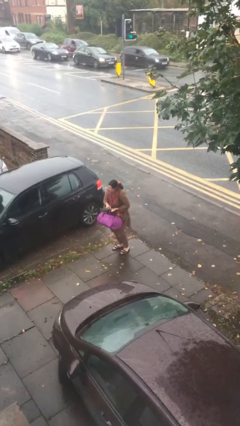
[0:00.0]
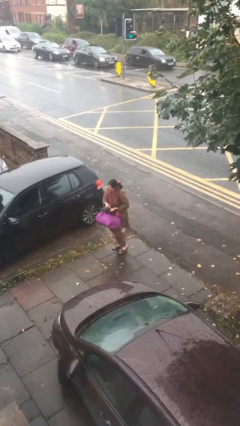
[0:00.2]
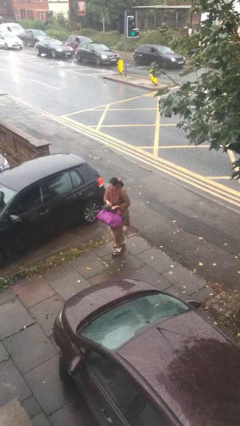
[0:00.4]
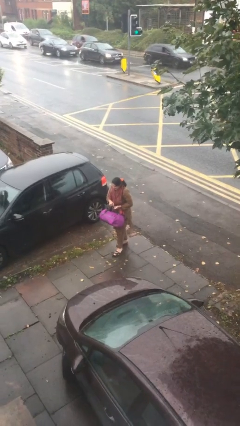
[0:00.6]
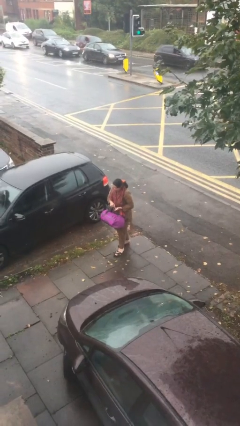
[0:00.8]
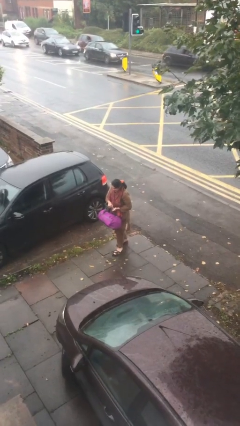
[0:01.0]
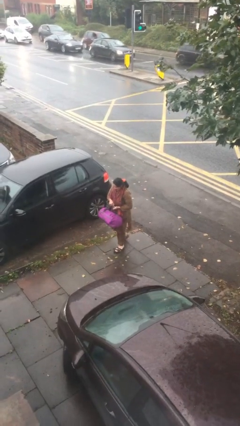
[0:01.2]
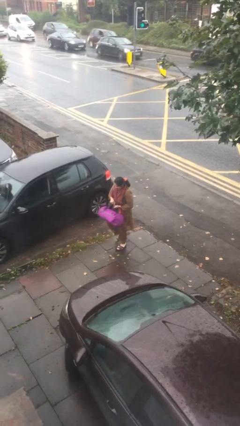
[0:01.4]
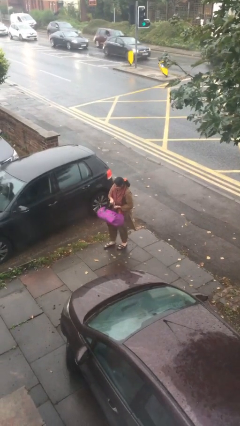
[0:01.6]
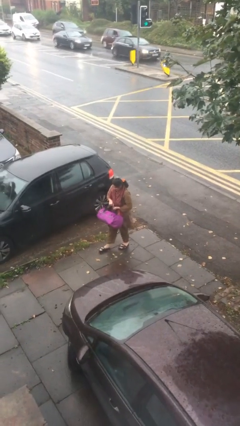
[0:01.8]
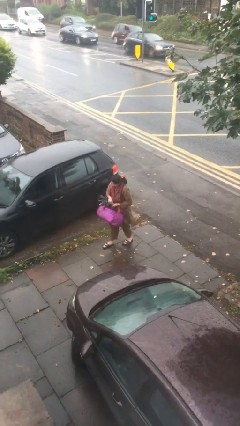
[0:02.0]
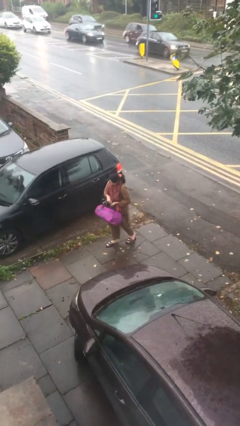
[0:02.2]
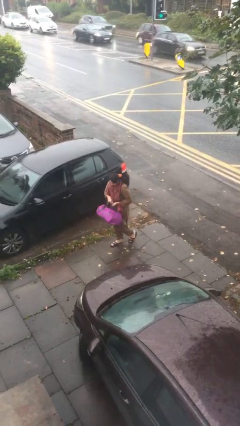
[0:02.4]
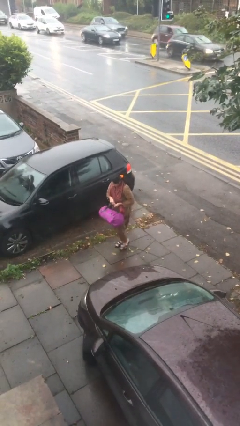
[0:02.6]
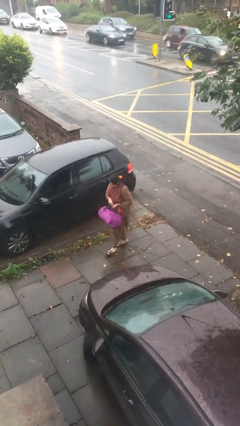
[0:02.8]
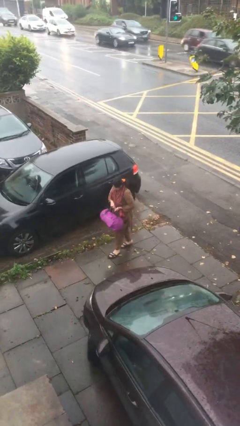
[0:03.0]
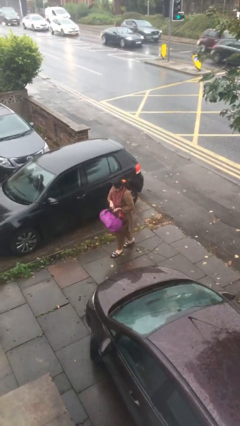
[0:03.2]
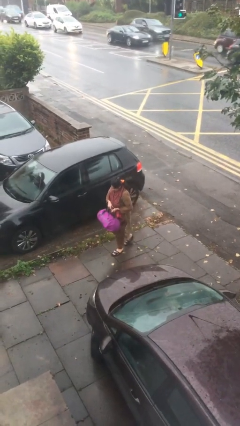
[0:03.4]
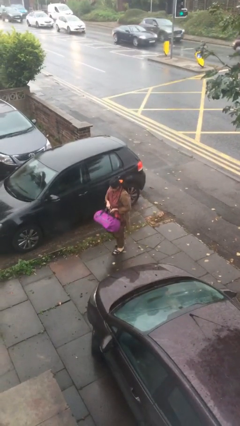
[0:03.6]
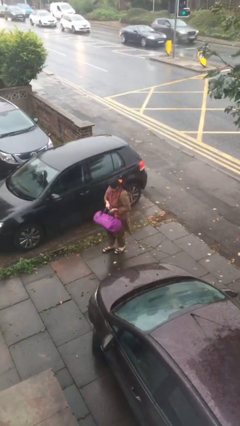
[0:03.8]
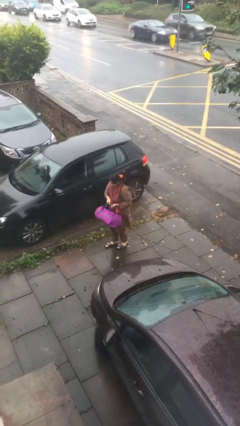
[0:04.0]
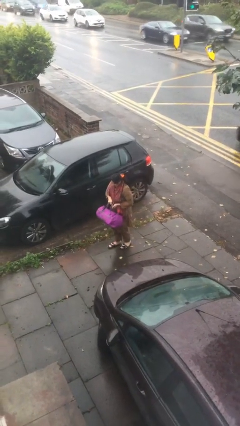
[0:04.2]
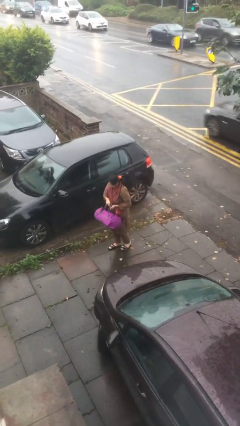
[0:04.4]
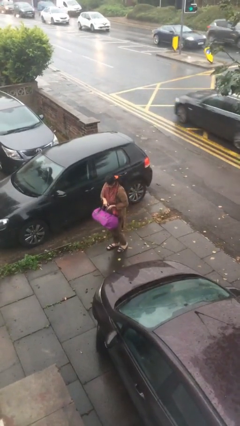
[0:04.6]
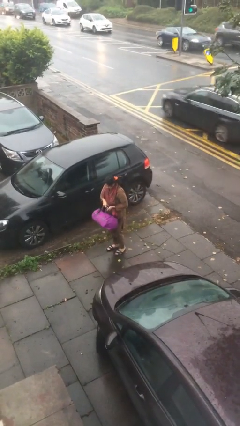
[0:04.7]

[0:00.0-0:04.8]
person carries heavy object

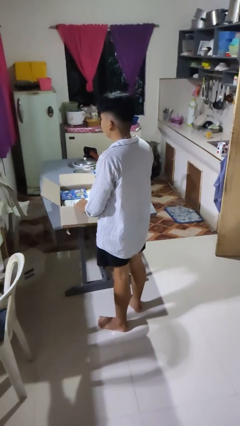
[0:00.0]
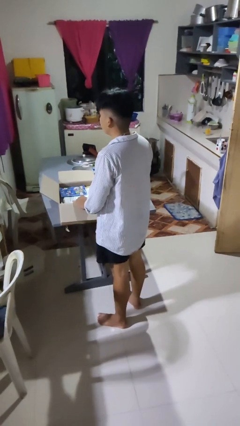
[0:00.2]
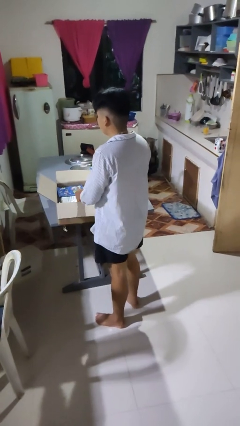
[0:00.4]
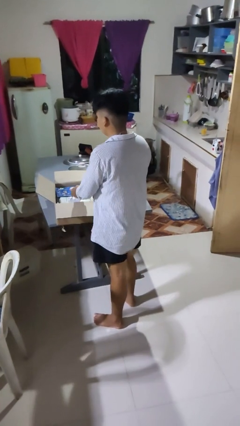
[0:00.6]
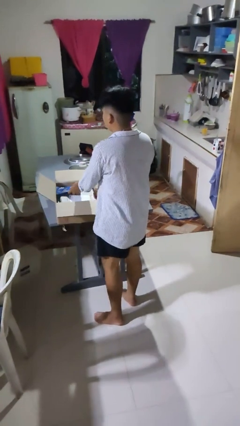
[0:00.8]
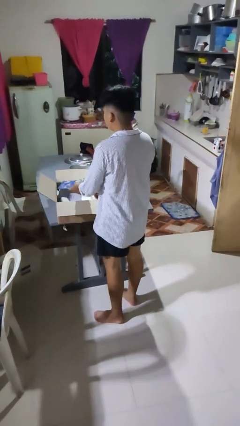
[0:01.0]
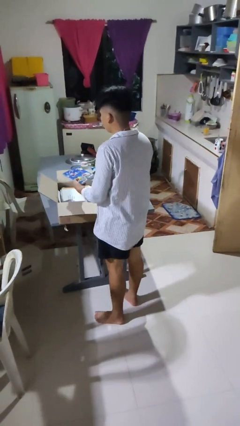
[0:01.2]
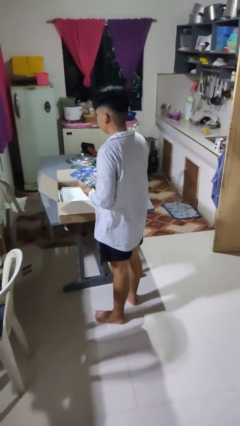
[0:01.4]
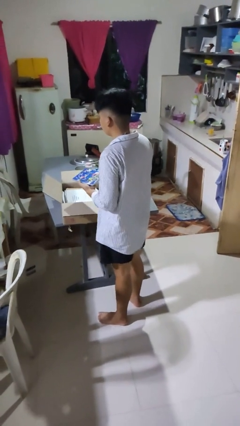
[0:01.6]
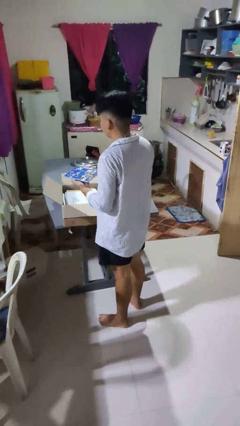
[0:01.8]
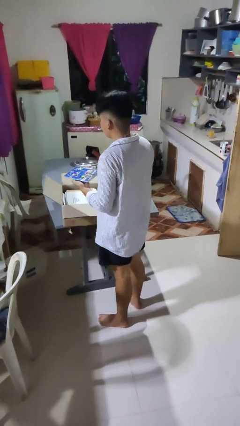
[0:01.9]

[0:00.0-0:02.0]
person takes object from box

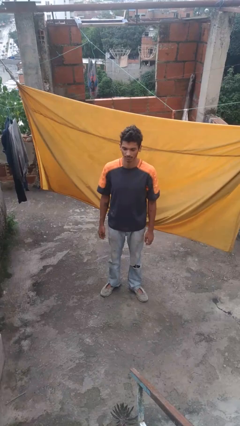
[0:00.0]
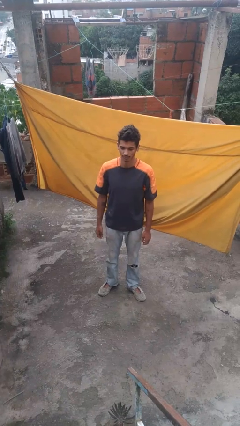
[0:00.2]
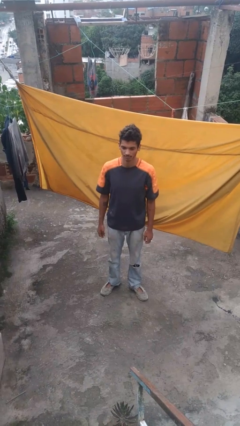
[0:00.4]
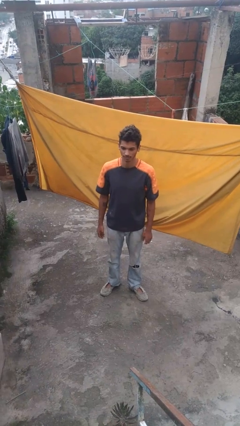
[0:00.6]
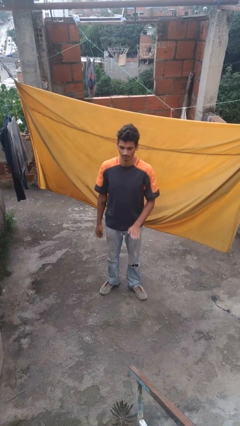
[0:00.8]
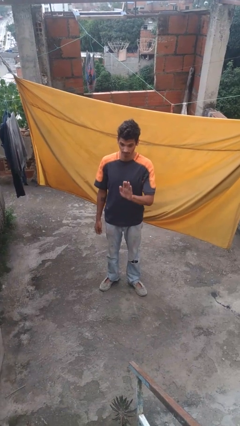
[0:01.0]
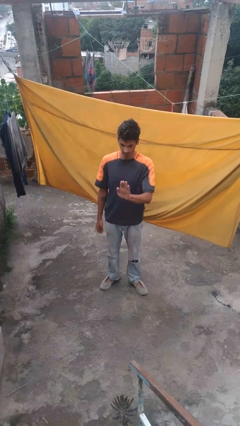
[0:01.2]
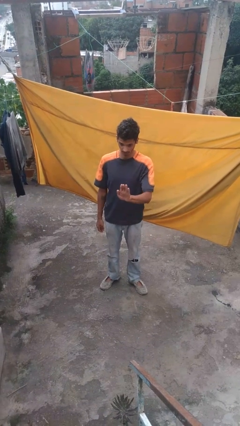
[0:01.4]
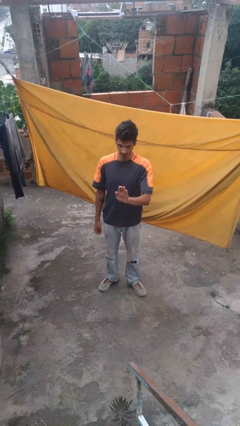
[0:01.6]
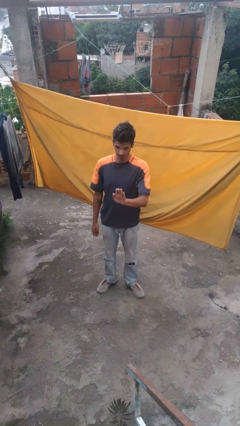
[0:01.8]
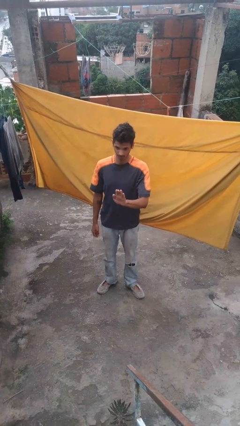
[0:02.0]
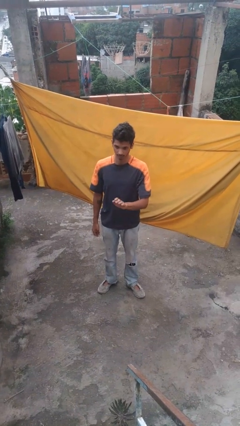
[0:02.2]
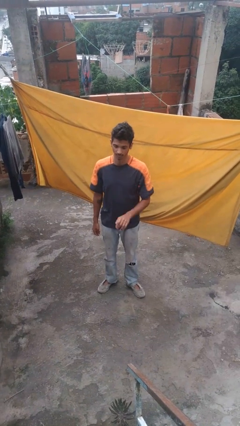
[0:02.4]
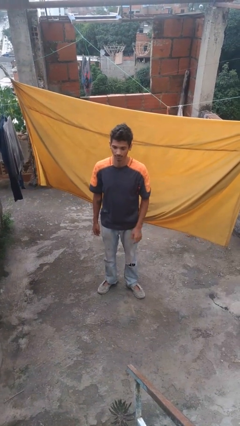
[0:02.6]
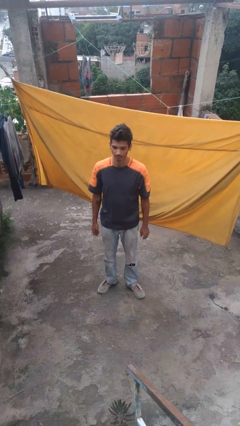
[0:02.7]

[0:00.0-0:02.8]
person gestures stop

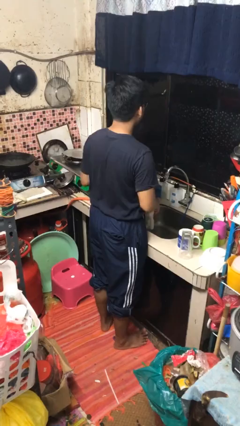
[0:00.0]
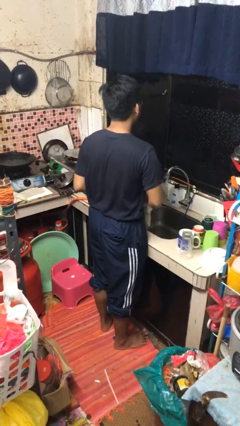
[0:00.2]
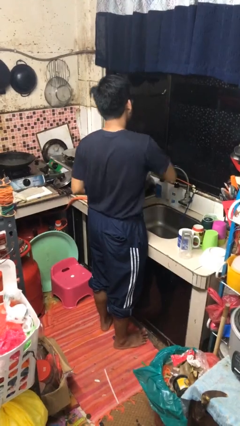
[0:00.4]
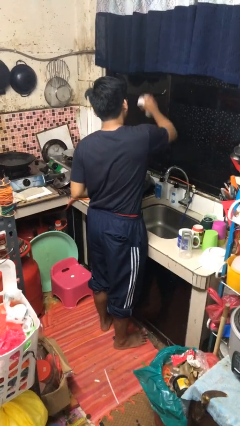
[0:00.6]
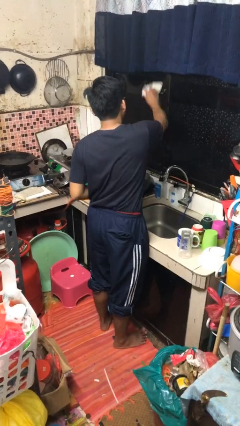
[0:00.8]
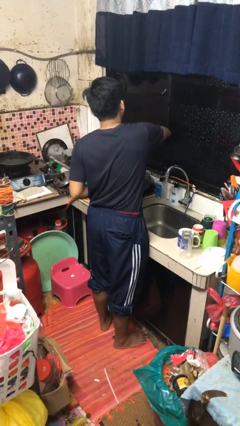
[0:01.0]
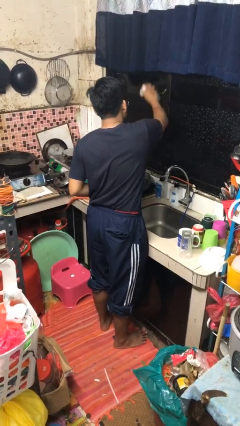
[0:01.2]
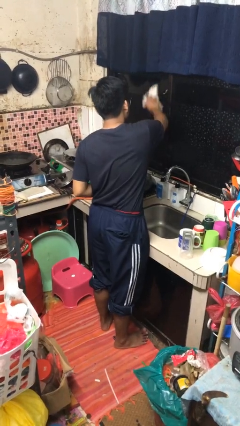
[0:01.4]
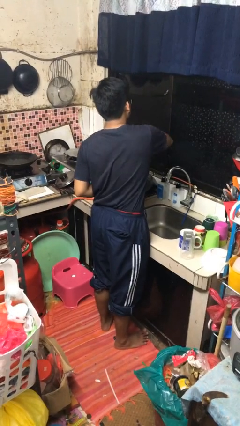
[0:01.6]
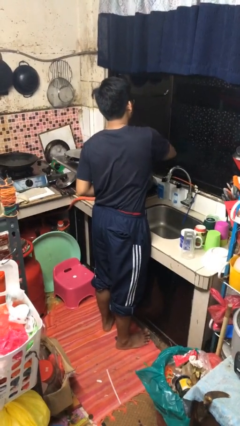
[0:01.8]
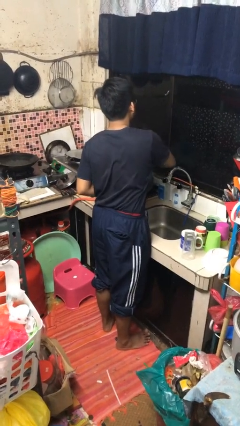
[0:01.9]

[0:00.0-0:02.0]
person washes window

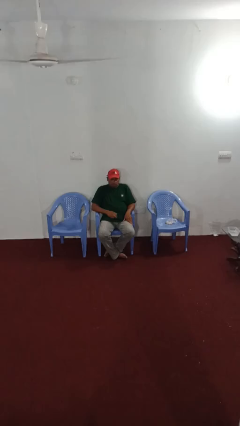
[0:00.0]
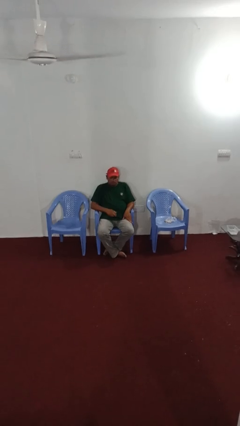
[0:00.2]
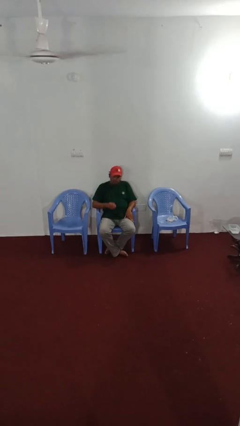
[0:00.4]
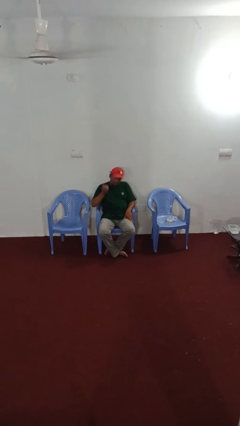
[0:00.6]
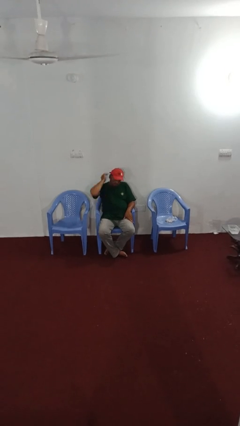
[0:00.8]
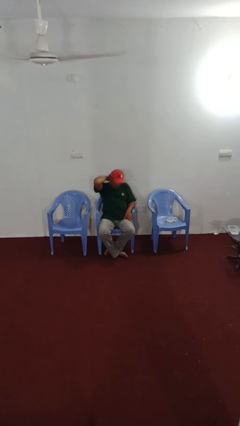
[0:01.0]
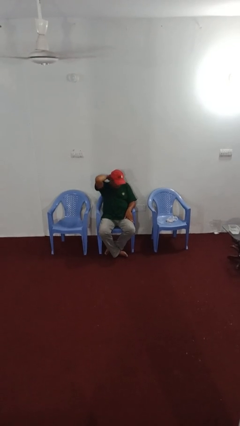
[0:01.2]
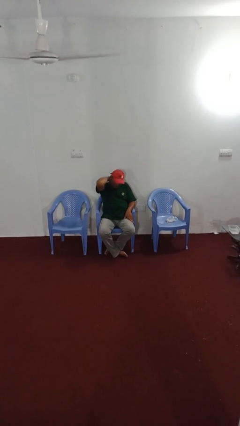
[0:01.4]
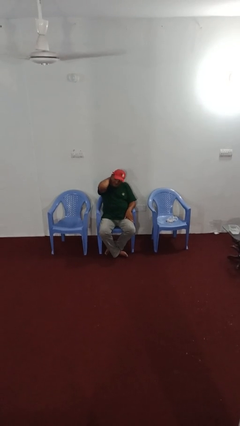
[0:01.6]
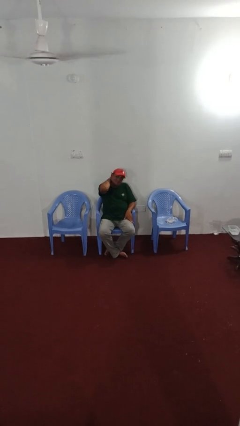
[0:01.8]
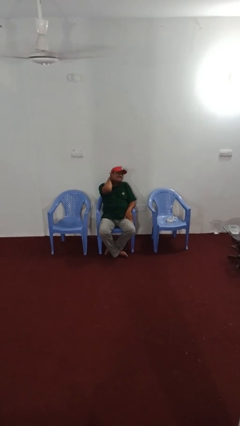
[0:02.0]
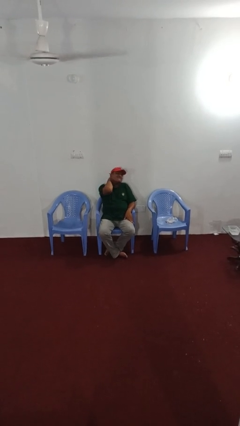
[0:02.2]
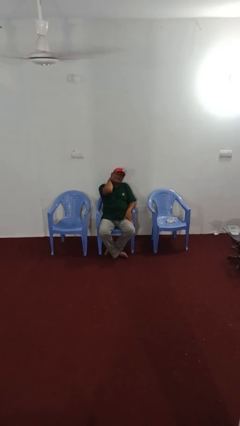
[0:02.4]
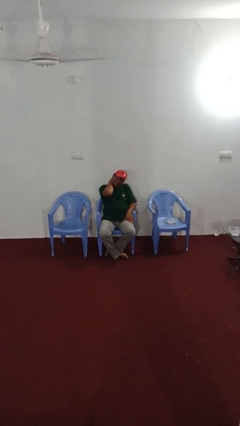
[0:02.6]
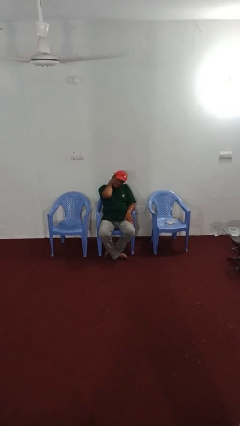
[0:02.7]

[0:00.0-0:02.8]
person rubs neck

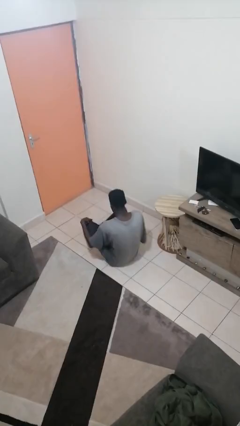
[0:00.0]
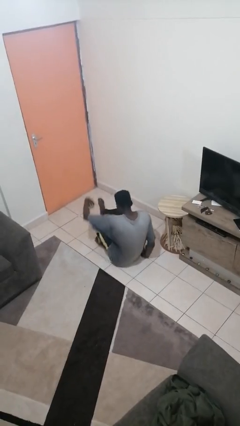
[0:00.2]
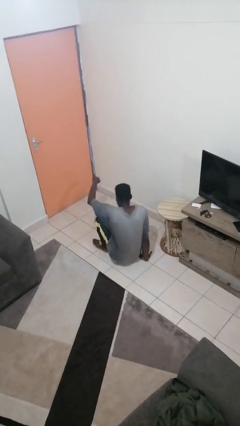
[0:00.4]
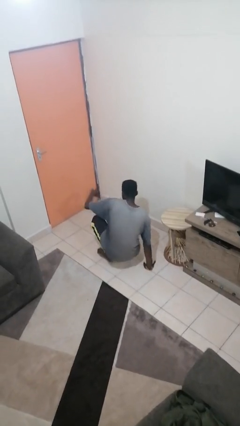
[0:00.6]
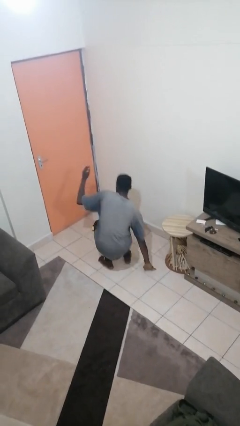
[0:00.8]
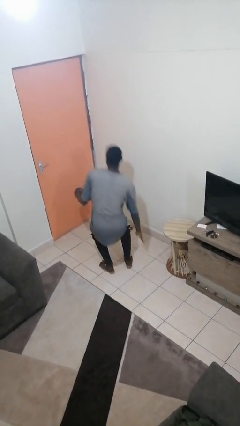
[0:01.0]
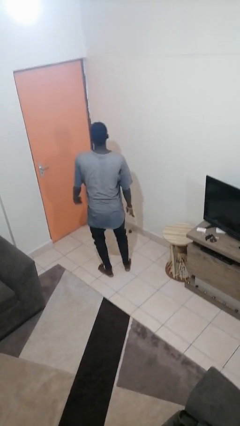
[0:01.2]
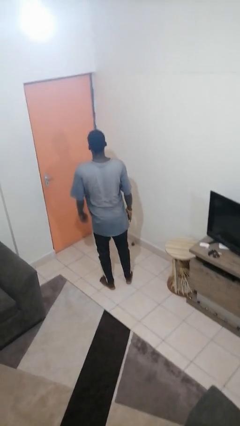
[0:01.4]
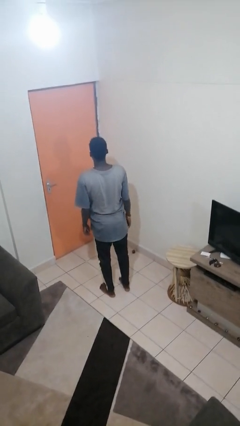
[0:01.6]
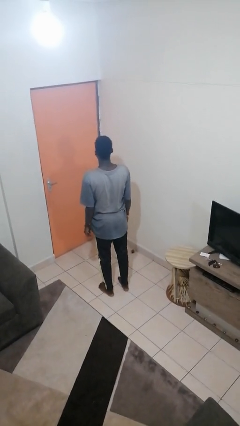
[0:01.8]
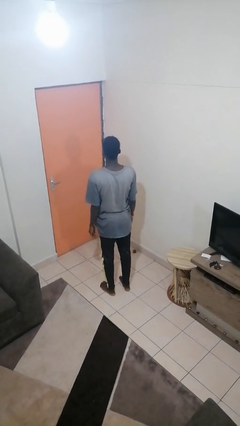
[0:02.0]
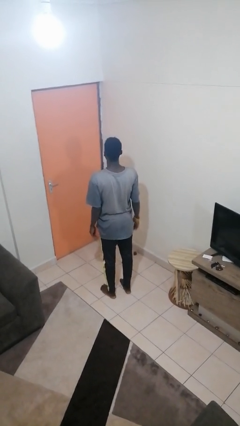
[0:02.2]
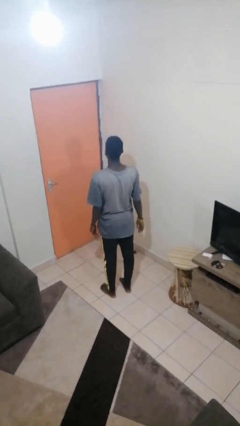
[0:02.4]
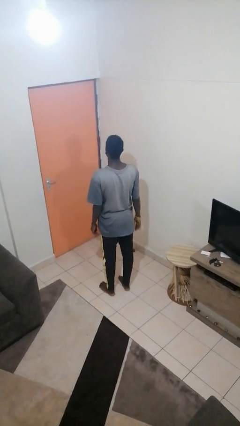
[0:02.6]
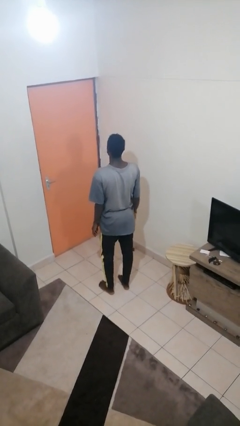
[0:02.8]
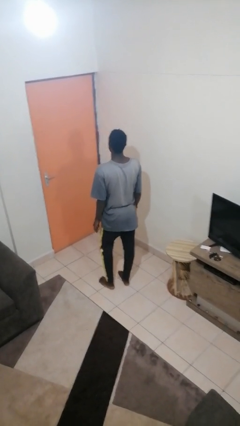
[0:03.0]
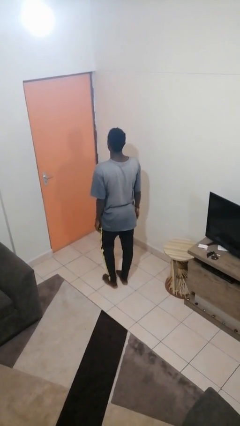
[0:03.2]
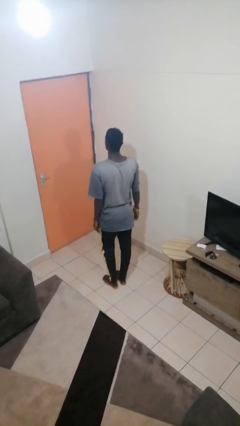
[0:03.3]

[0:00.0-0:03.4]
person stands up from floor
